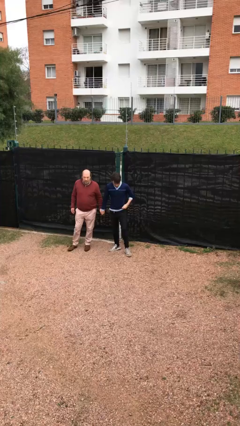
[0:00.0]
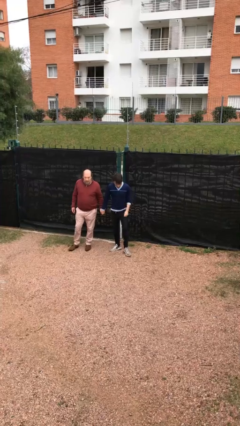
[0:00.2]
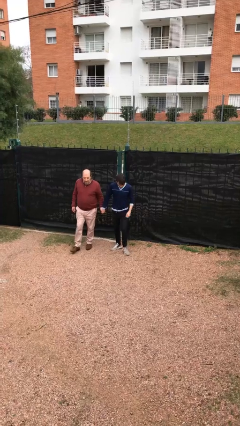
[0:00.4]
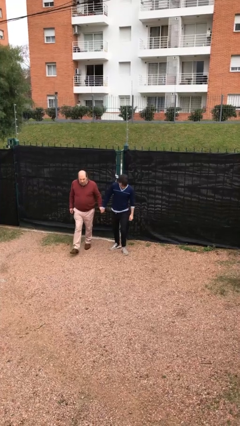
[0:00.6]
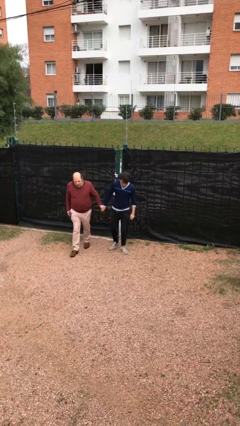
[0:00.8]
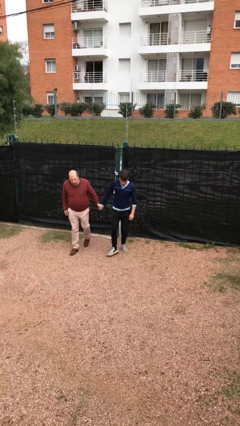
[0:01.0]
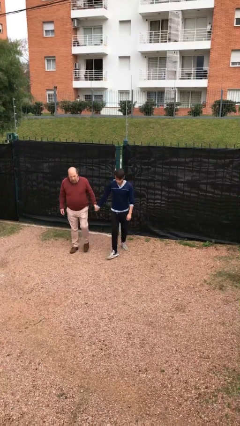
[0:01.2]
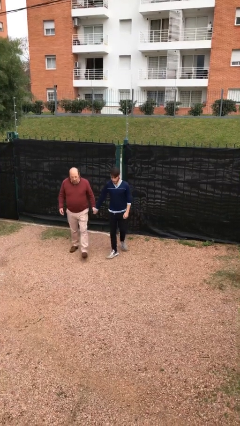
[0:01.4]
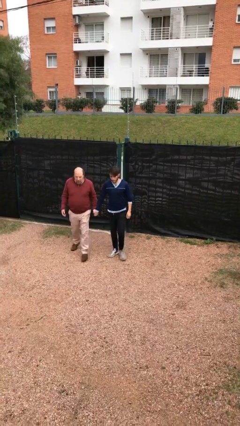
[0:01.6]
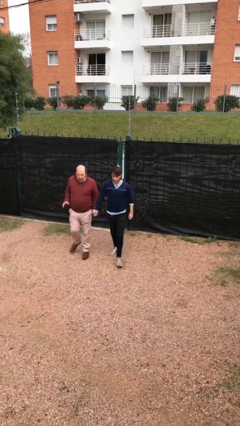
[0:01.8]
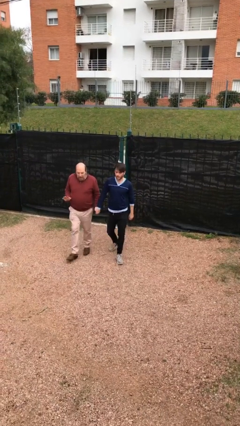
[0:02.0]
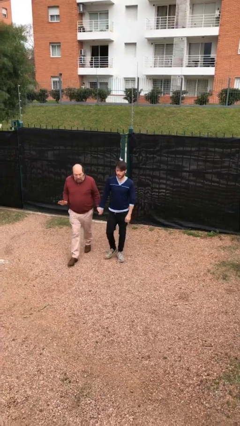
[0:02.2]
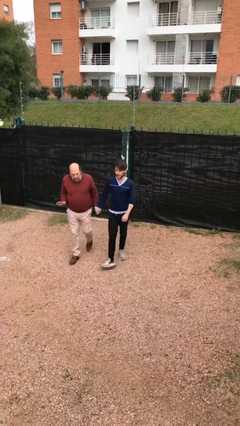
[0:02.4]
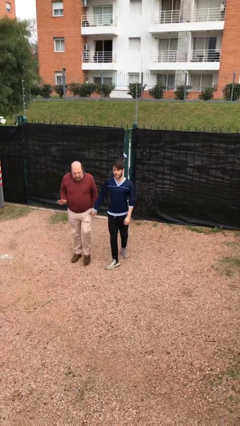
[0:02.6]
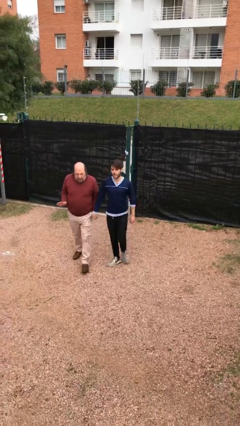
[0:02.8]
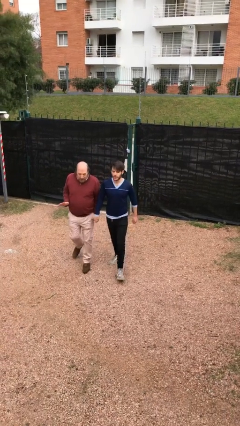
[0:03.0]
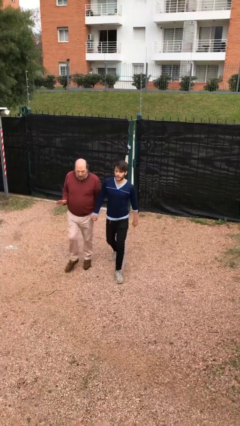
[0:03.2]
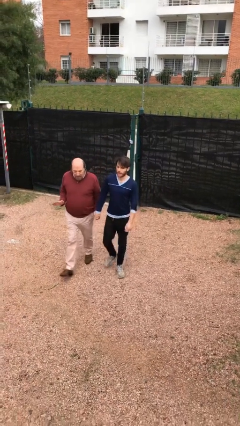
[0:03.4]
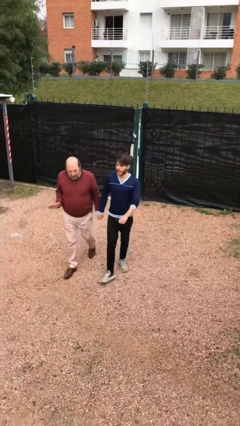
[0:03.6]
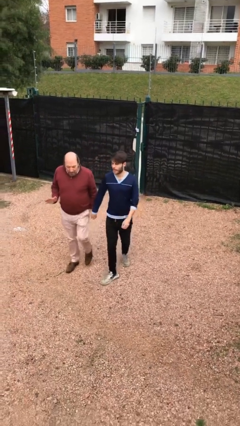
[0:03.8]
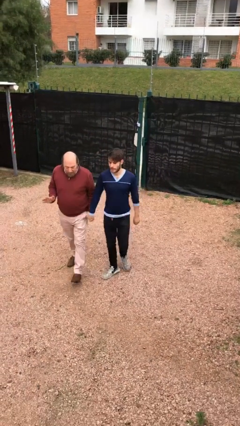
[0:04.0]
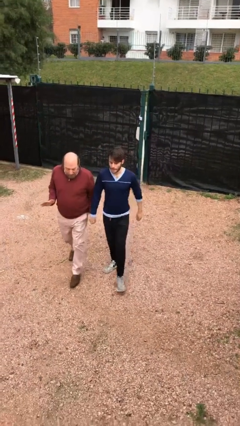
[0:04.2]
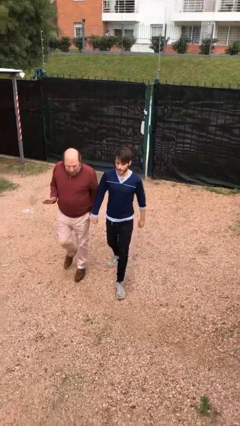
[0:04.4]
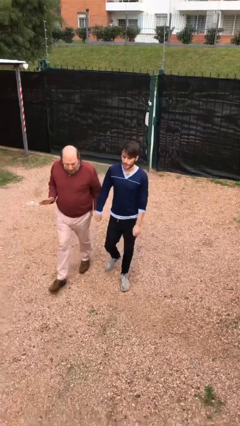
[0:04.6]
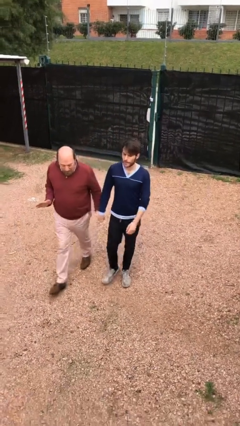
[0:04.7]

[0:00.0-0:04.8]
person holds hand

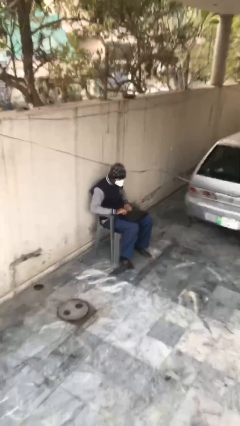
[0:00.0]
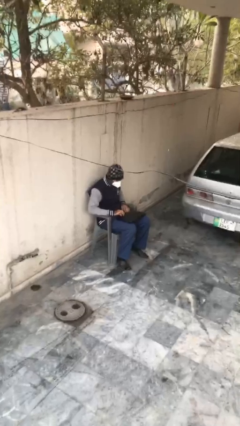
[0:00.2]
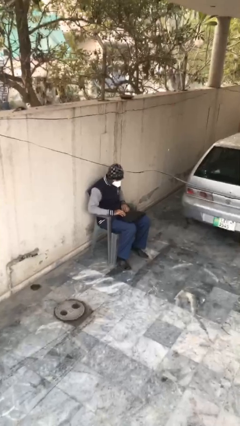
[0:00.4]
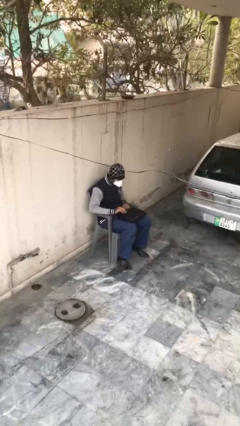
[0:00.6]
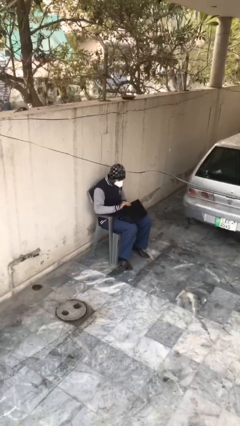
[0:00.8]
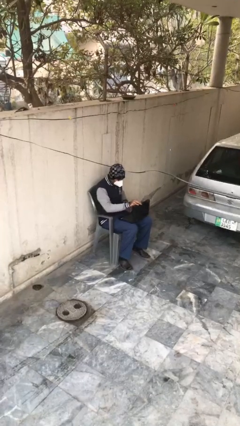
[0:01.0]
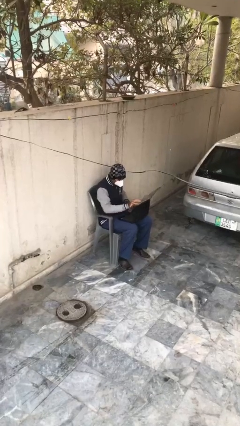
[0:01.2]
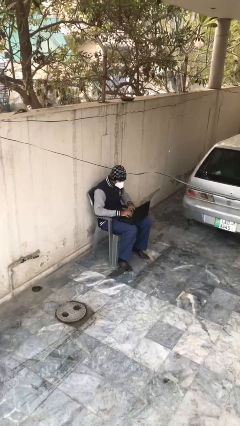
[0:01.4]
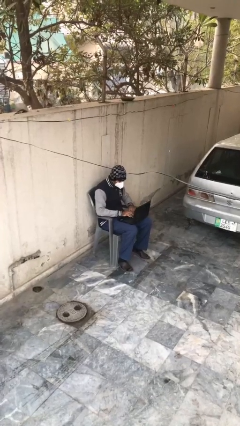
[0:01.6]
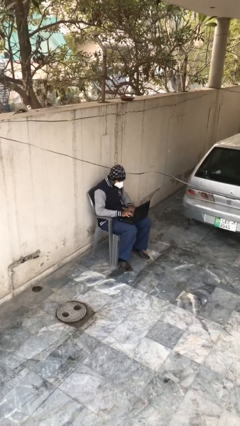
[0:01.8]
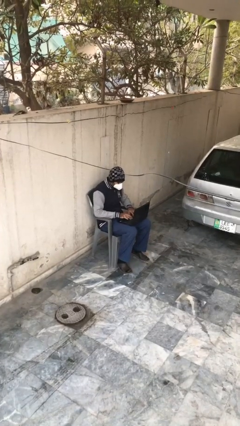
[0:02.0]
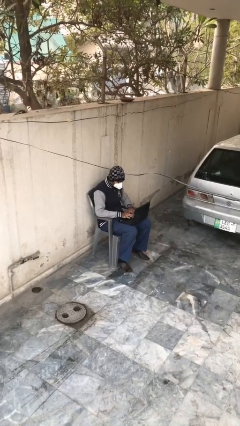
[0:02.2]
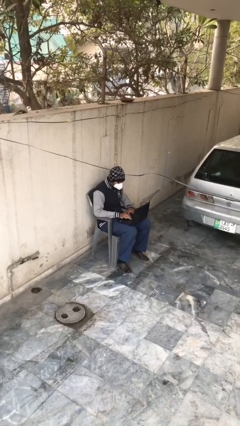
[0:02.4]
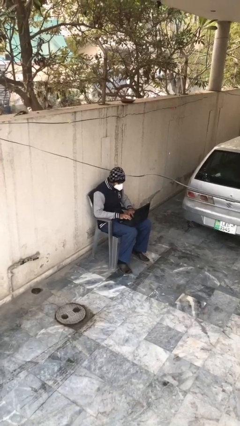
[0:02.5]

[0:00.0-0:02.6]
person interacts with laptop

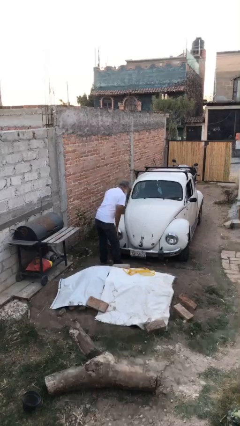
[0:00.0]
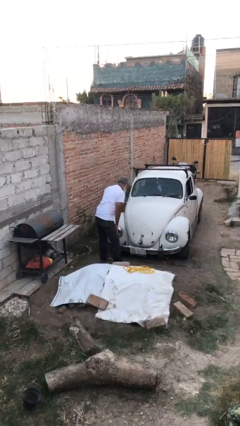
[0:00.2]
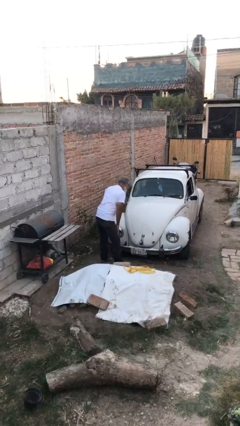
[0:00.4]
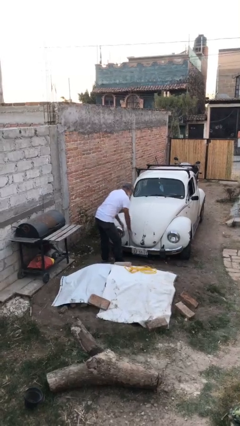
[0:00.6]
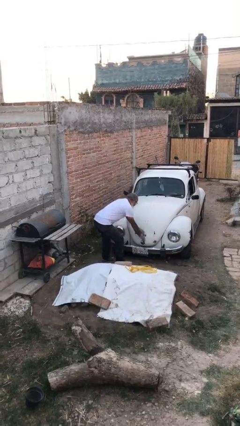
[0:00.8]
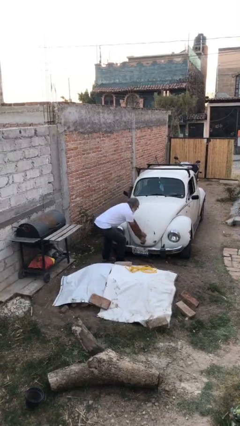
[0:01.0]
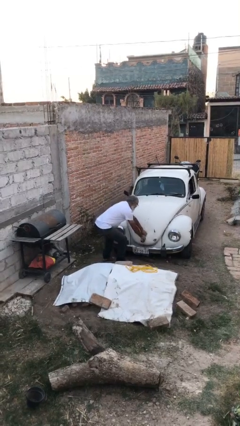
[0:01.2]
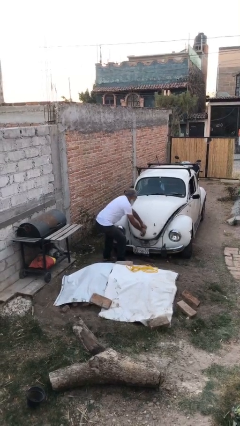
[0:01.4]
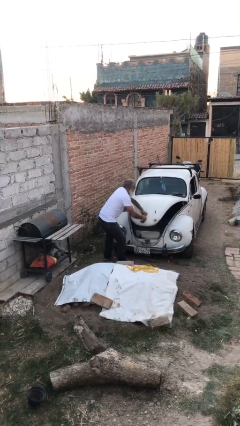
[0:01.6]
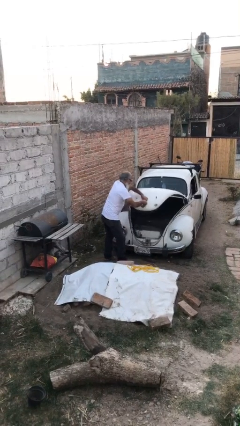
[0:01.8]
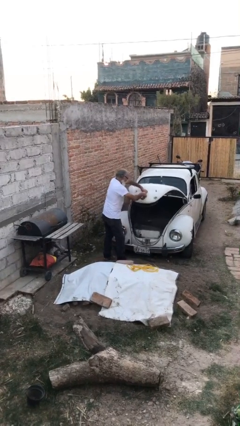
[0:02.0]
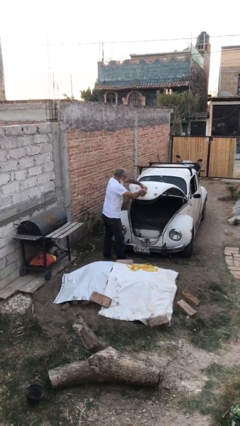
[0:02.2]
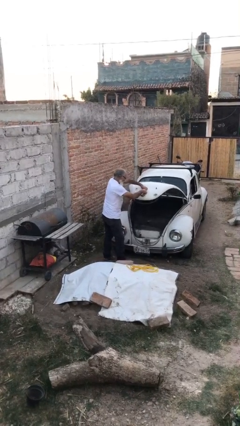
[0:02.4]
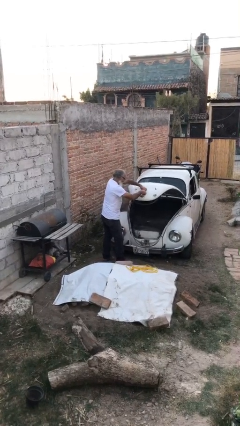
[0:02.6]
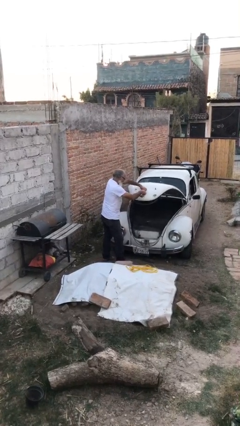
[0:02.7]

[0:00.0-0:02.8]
person opens car trunk

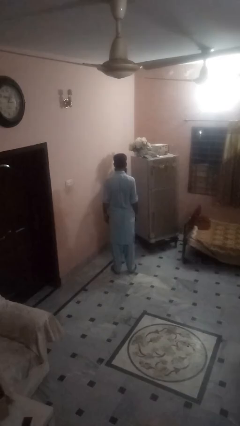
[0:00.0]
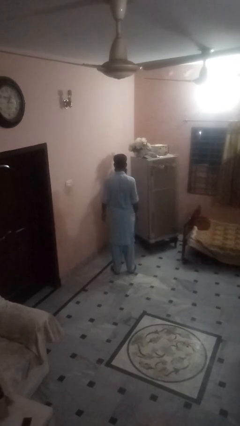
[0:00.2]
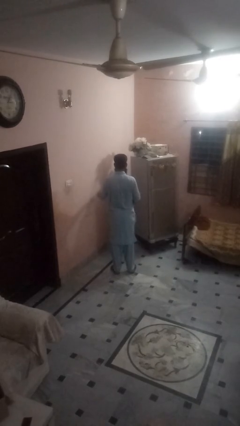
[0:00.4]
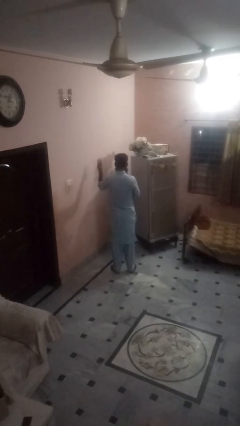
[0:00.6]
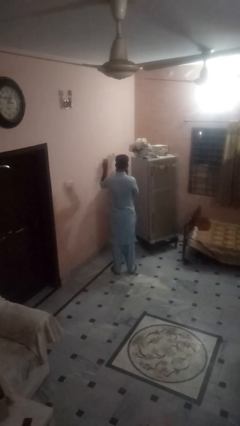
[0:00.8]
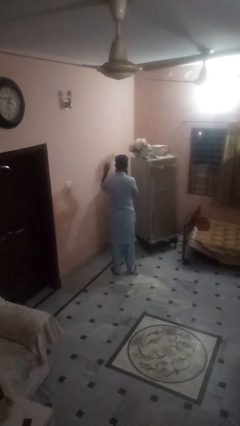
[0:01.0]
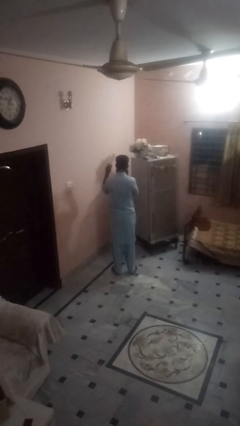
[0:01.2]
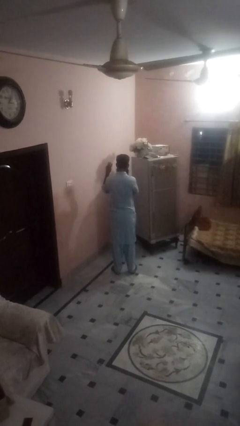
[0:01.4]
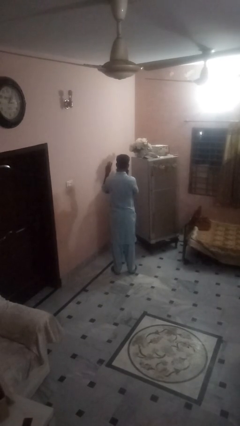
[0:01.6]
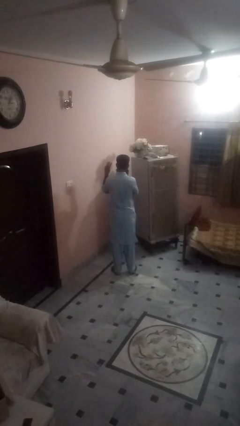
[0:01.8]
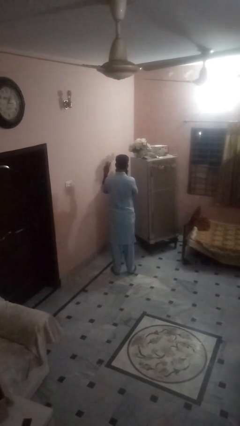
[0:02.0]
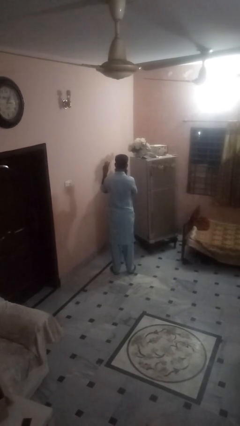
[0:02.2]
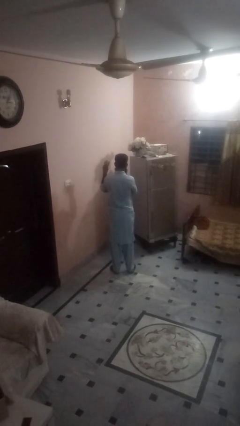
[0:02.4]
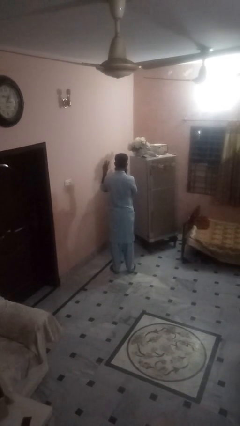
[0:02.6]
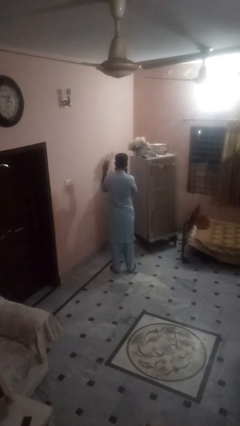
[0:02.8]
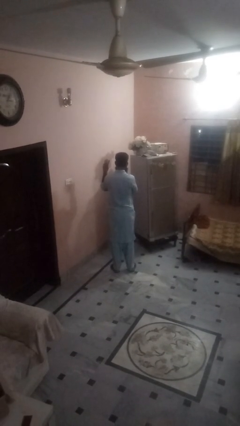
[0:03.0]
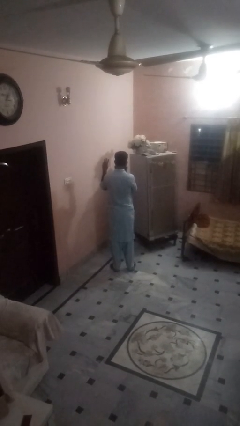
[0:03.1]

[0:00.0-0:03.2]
person gestures number three

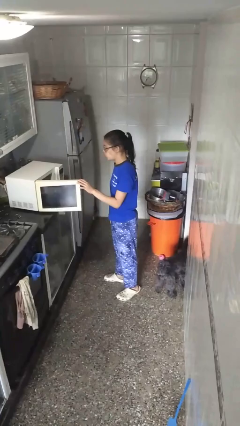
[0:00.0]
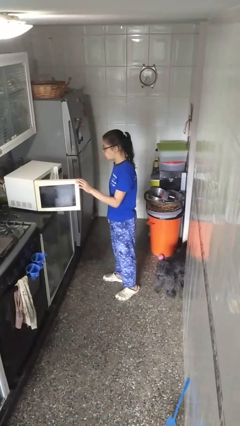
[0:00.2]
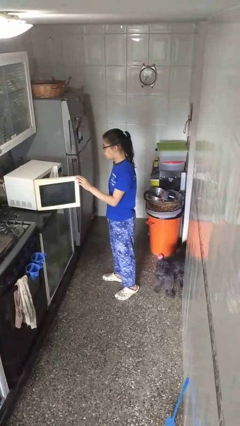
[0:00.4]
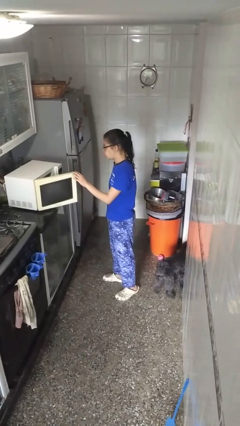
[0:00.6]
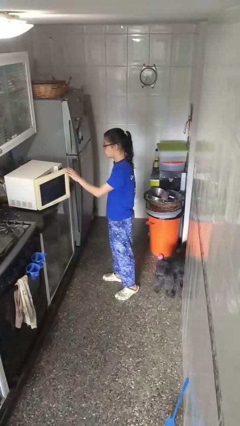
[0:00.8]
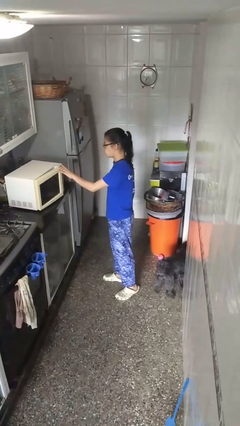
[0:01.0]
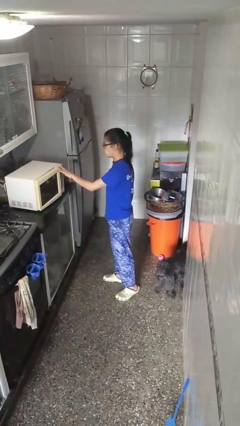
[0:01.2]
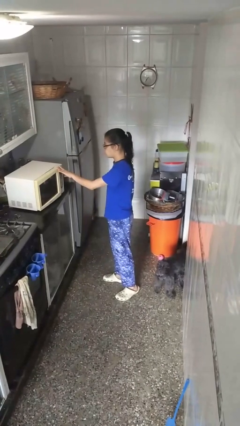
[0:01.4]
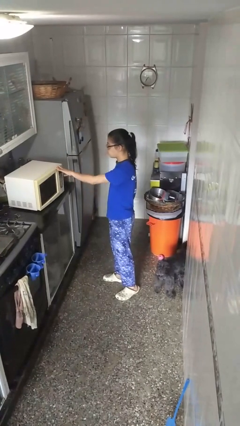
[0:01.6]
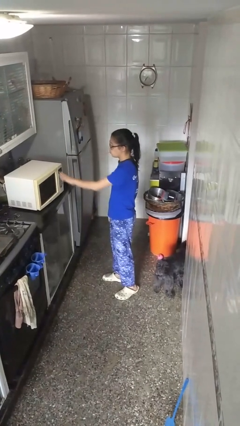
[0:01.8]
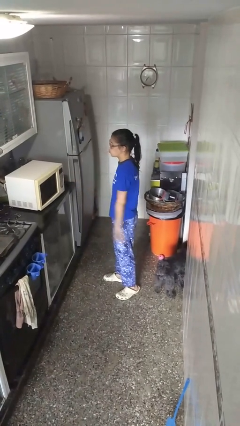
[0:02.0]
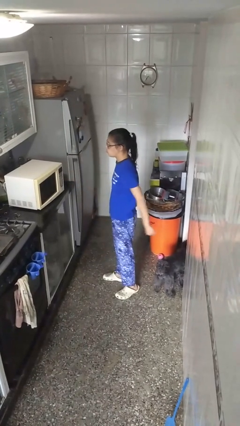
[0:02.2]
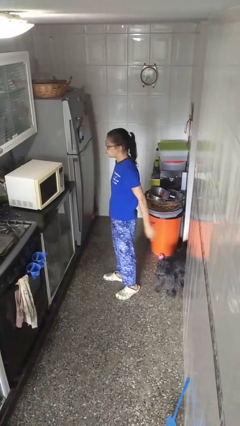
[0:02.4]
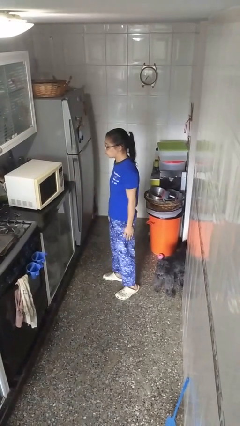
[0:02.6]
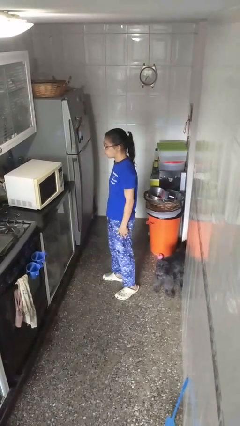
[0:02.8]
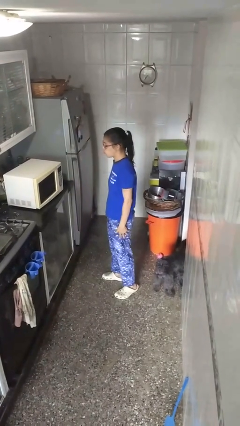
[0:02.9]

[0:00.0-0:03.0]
person closes microwave

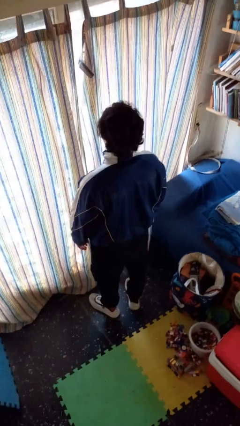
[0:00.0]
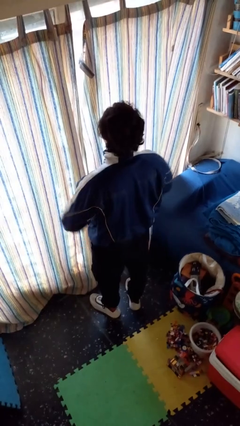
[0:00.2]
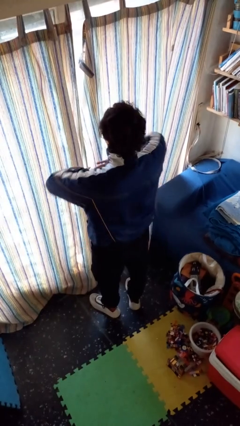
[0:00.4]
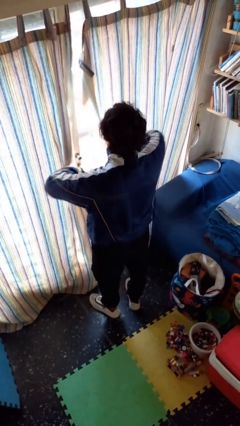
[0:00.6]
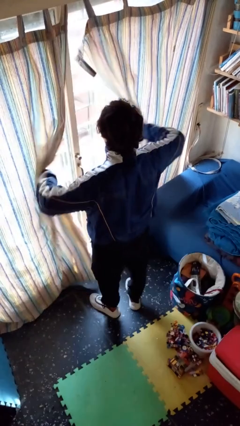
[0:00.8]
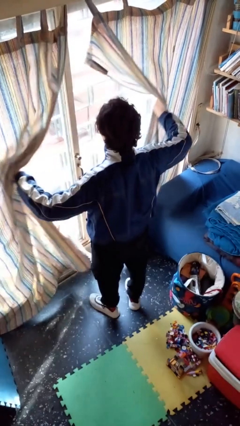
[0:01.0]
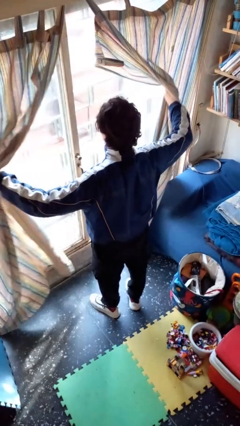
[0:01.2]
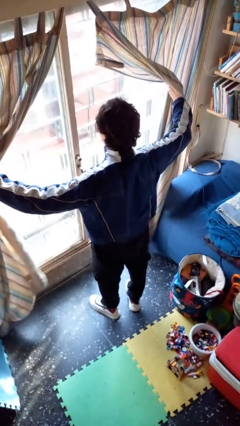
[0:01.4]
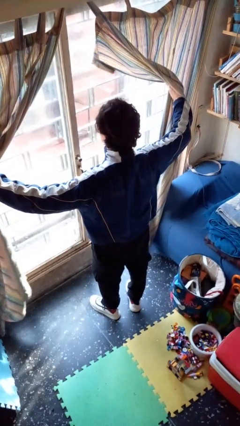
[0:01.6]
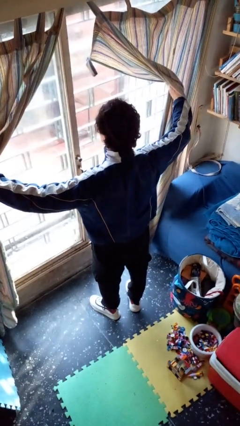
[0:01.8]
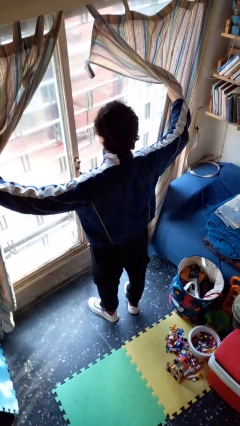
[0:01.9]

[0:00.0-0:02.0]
person opens curtains
